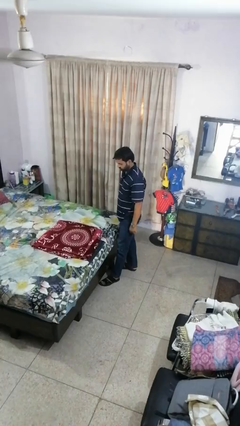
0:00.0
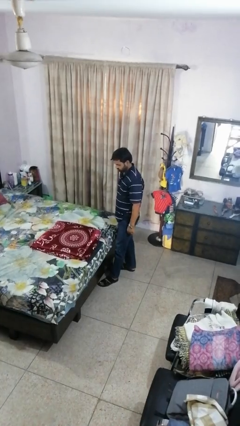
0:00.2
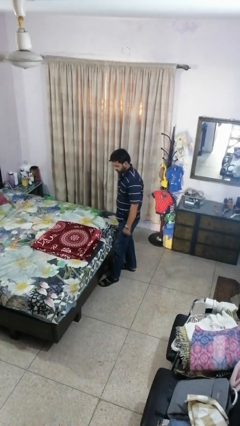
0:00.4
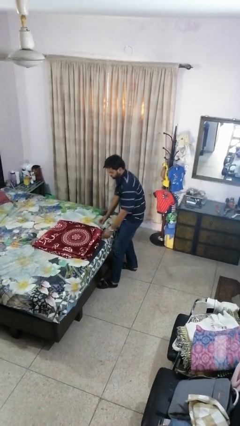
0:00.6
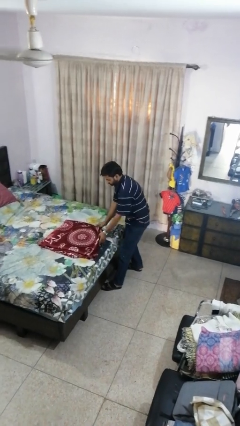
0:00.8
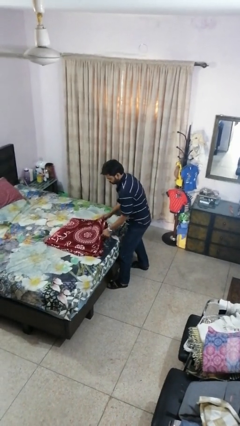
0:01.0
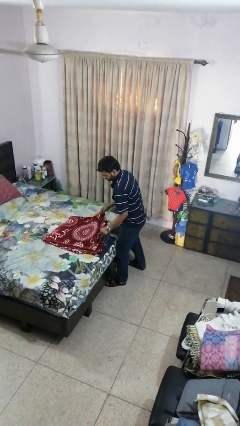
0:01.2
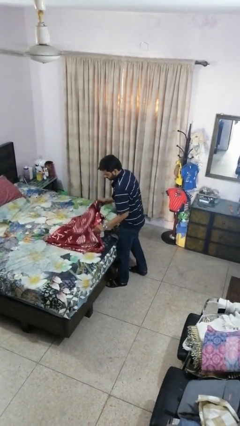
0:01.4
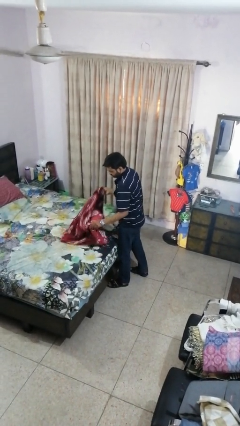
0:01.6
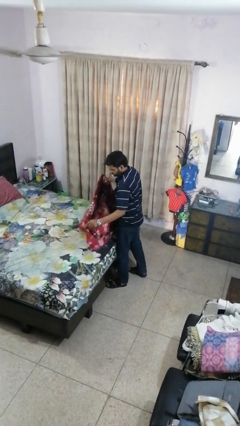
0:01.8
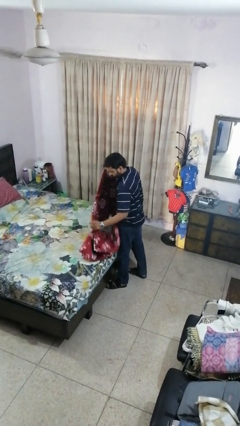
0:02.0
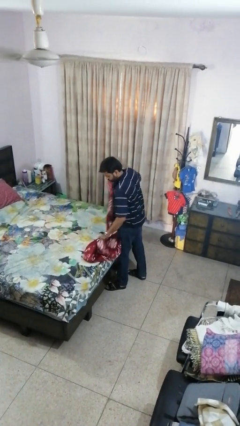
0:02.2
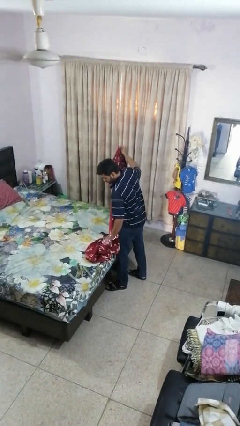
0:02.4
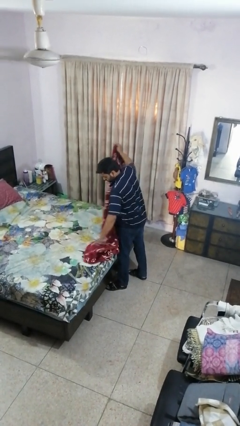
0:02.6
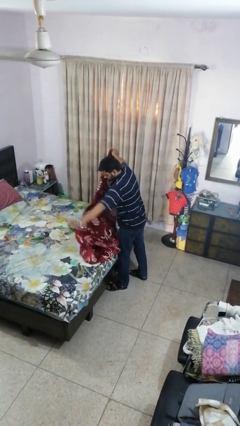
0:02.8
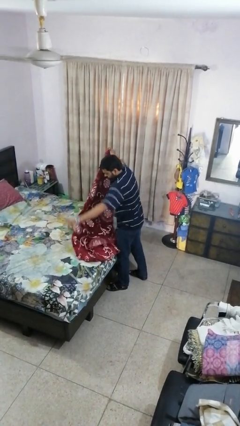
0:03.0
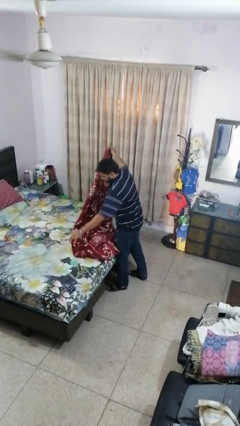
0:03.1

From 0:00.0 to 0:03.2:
person crumples paper

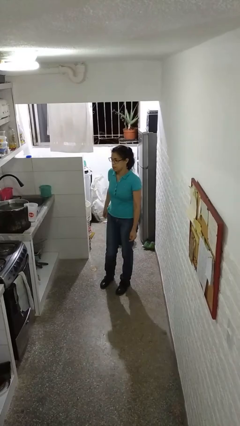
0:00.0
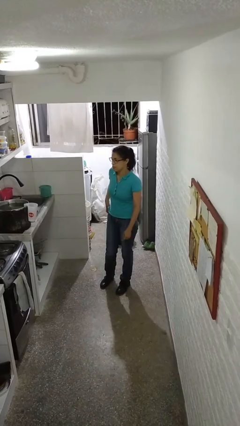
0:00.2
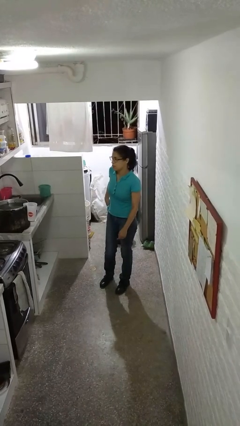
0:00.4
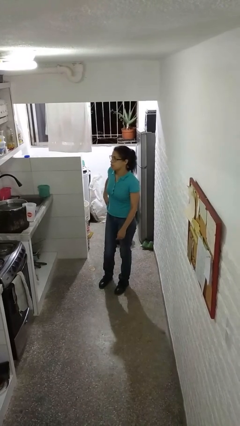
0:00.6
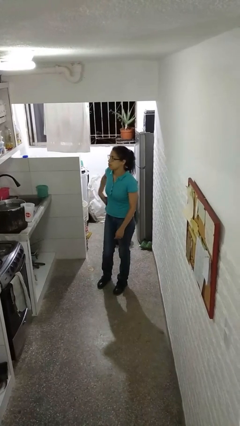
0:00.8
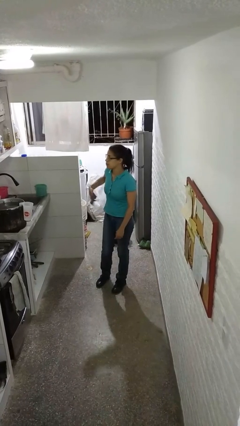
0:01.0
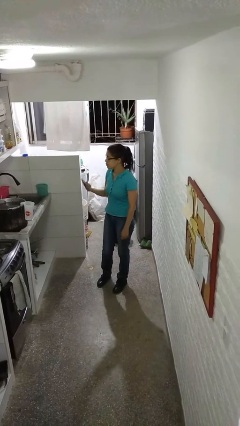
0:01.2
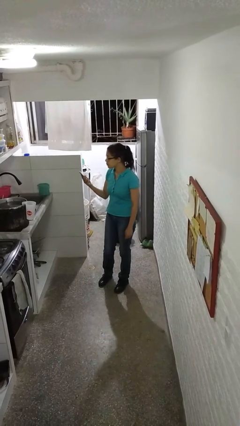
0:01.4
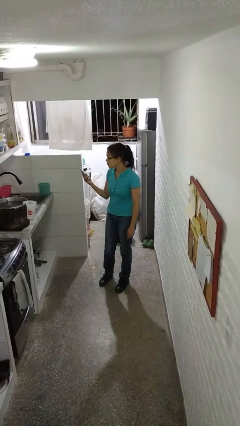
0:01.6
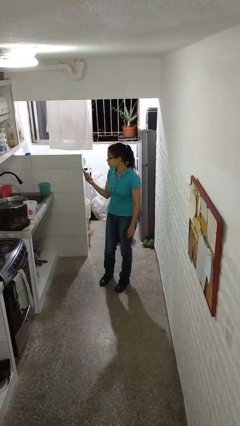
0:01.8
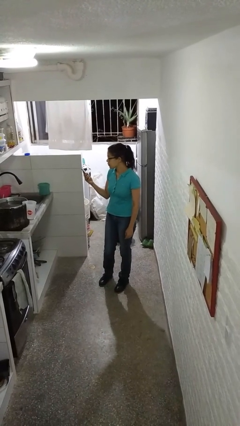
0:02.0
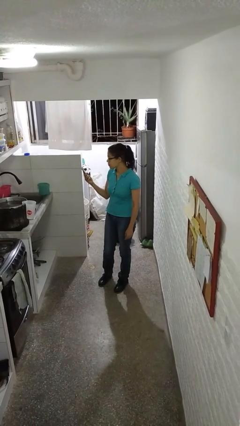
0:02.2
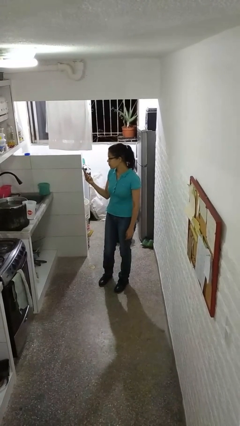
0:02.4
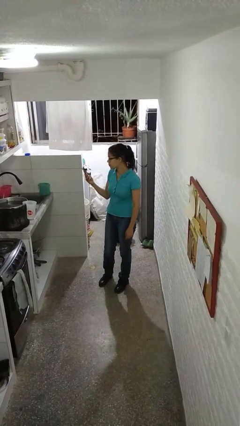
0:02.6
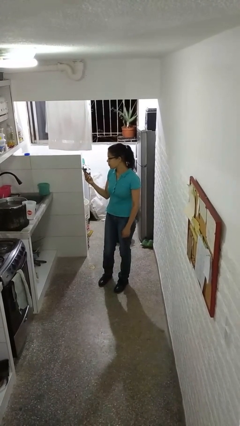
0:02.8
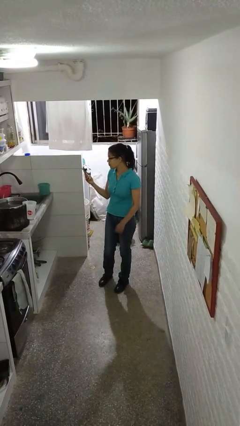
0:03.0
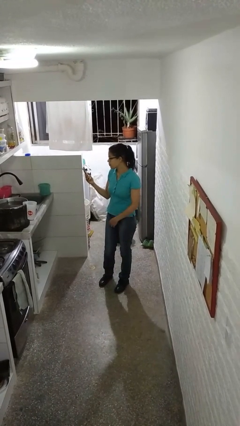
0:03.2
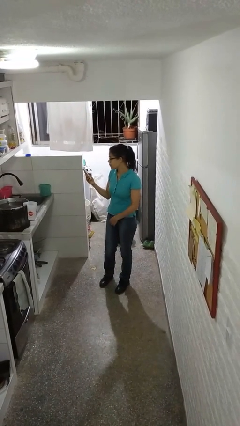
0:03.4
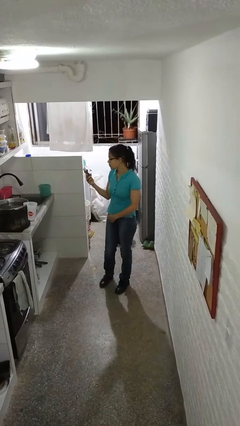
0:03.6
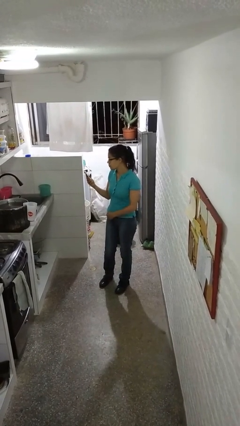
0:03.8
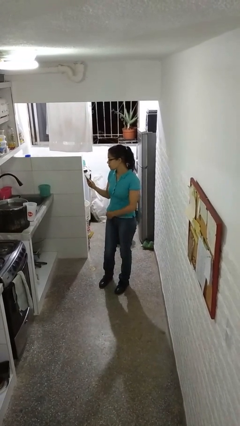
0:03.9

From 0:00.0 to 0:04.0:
person takes phone from pocket

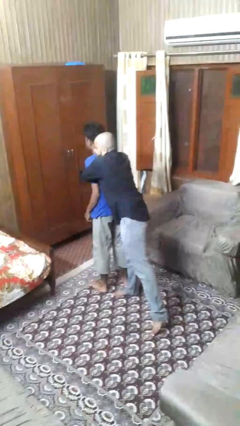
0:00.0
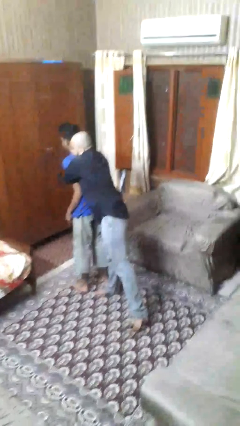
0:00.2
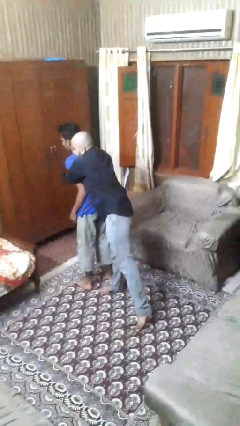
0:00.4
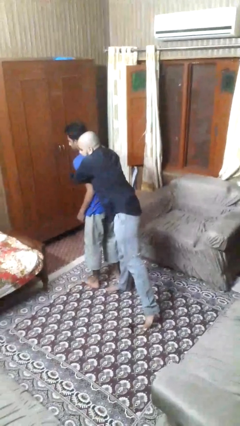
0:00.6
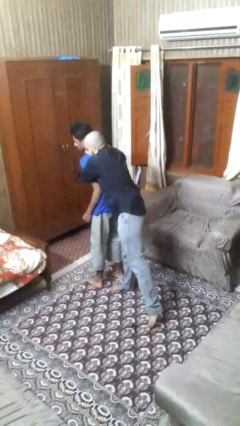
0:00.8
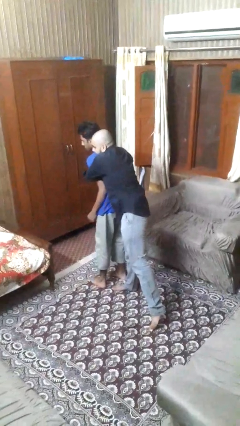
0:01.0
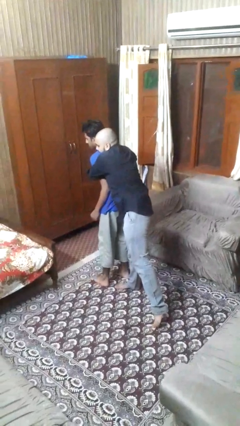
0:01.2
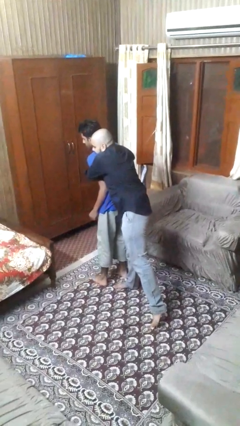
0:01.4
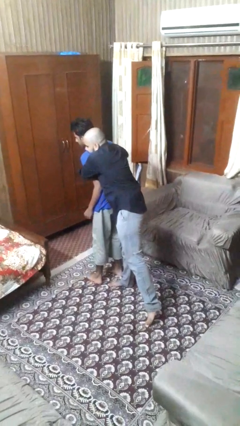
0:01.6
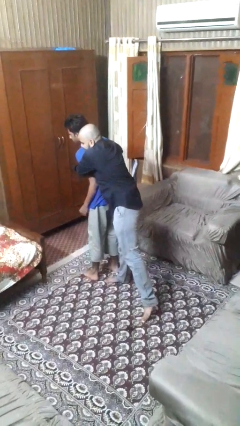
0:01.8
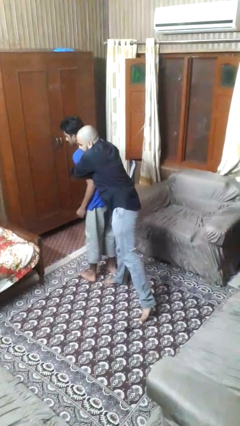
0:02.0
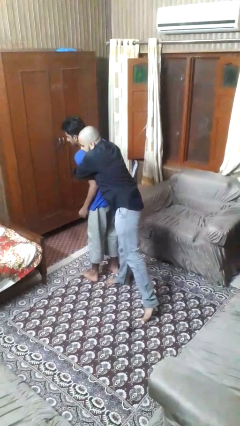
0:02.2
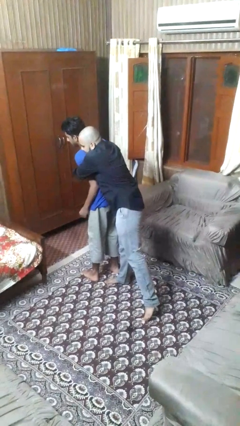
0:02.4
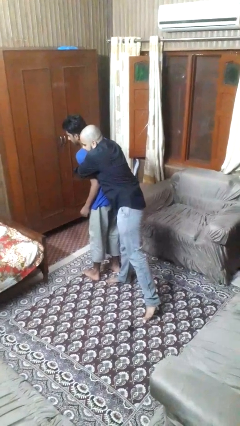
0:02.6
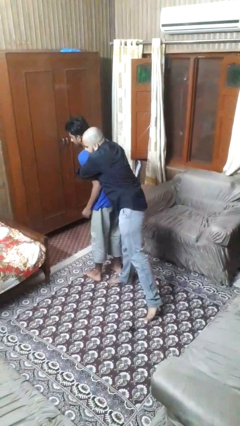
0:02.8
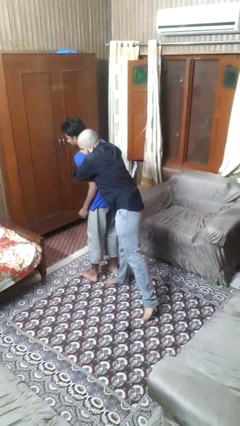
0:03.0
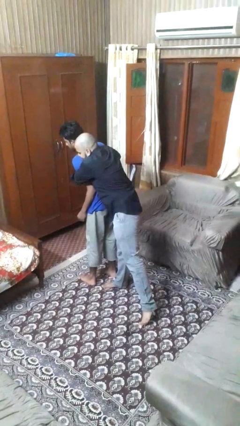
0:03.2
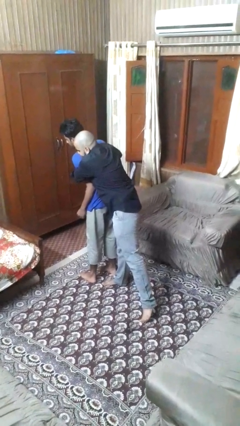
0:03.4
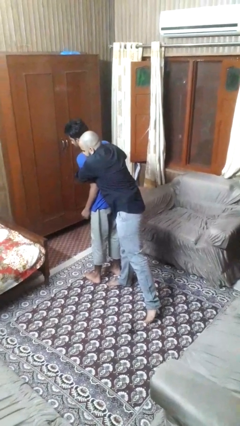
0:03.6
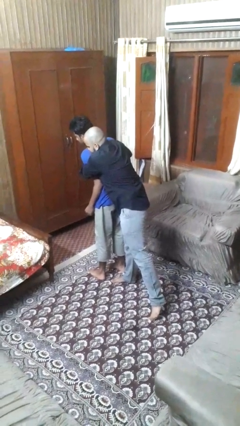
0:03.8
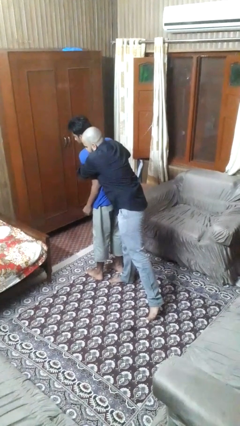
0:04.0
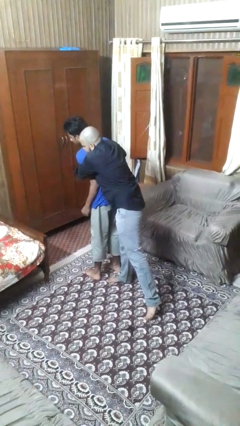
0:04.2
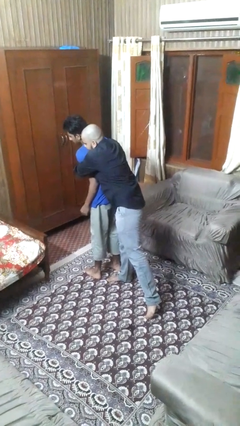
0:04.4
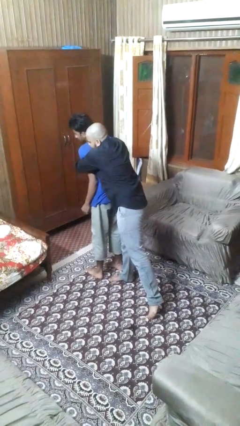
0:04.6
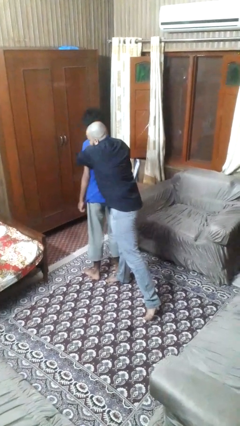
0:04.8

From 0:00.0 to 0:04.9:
person grabs person by shoulder

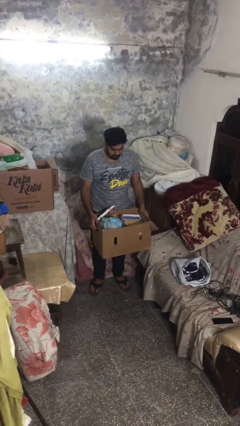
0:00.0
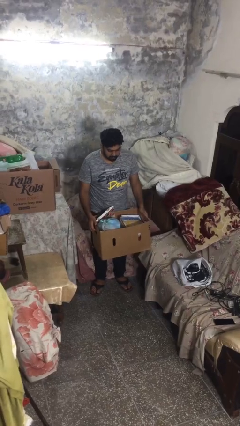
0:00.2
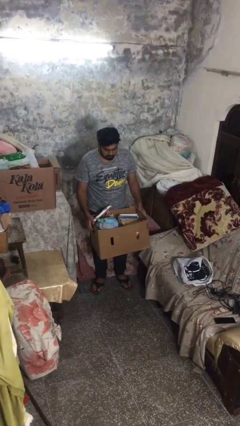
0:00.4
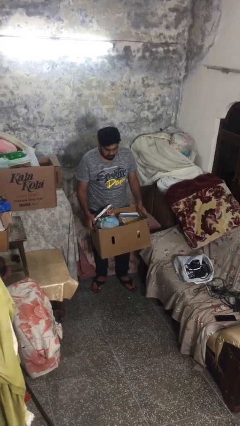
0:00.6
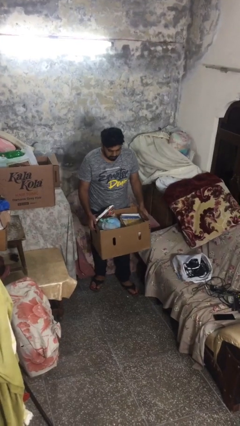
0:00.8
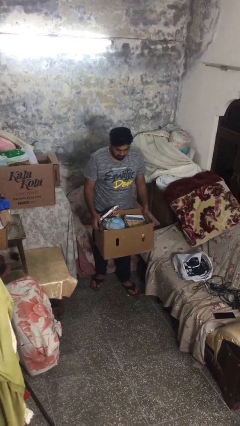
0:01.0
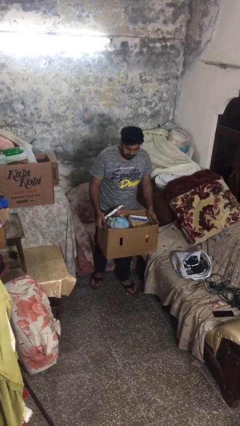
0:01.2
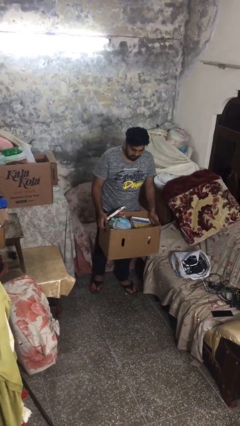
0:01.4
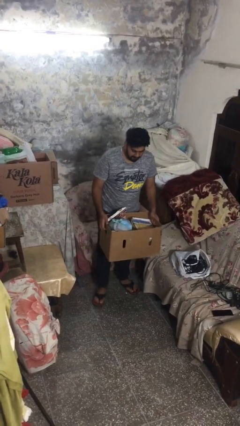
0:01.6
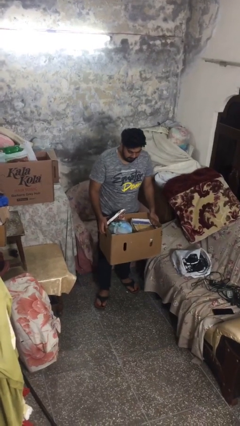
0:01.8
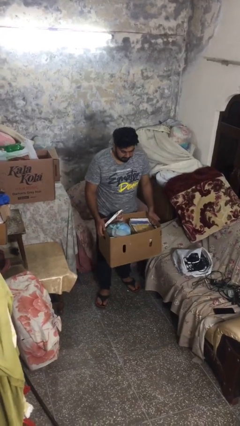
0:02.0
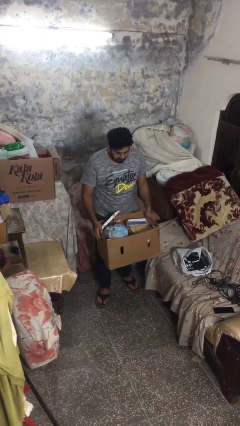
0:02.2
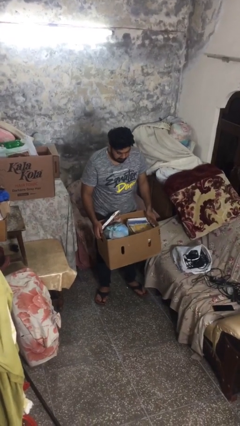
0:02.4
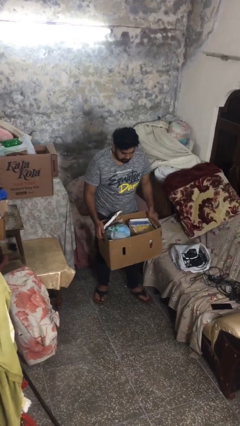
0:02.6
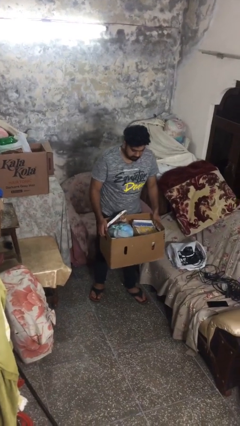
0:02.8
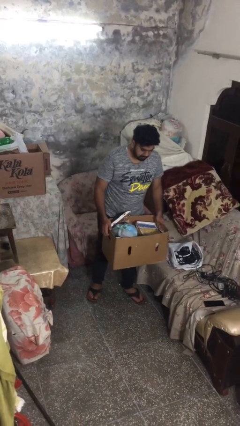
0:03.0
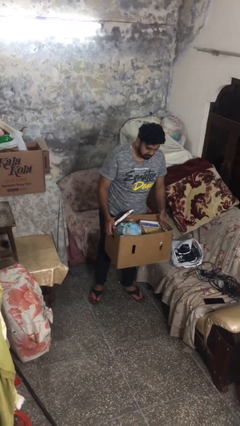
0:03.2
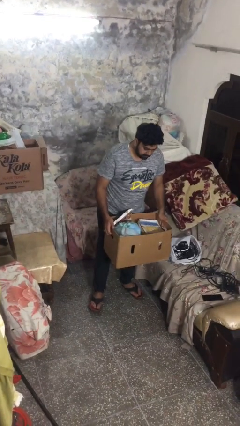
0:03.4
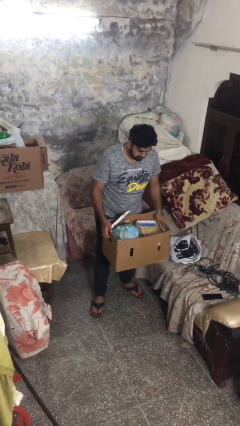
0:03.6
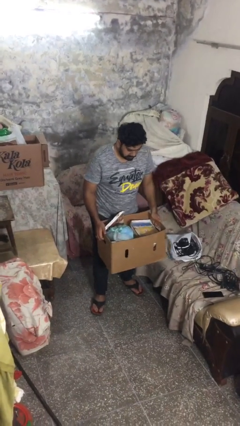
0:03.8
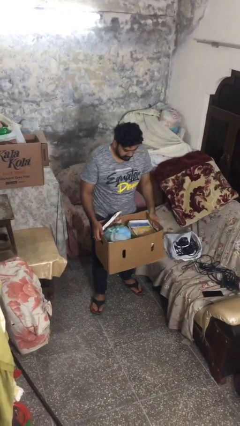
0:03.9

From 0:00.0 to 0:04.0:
person carries heavy object

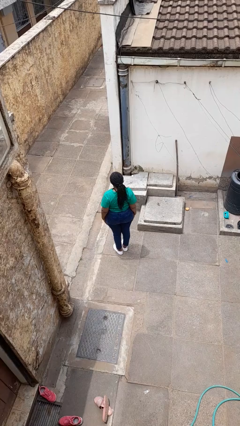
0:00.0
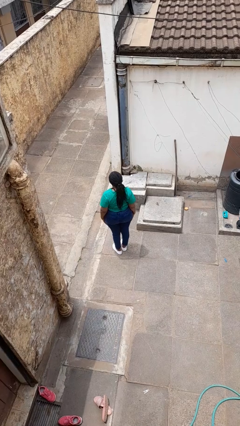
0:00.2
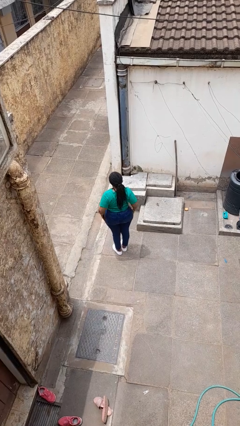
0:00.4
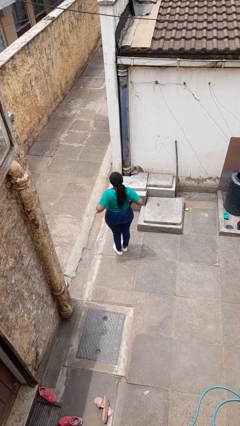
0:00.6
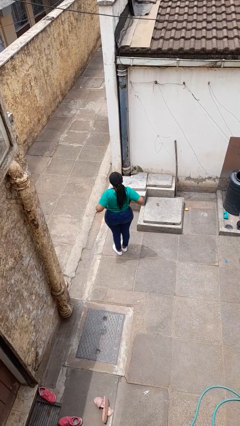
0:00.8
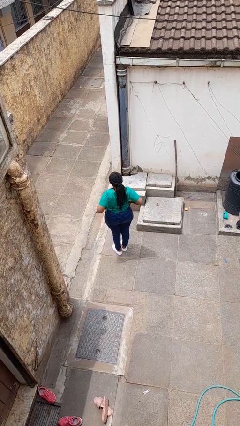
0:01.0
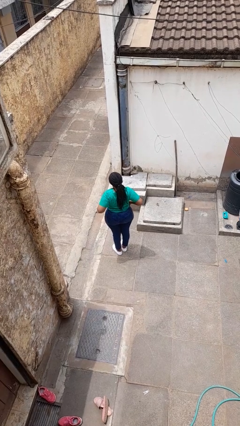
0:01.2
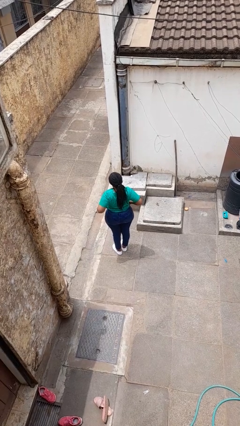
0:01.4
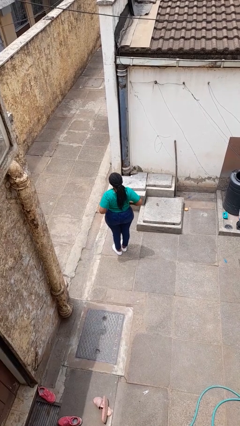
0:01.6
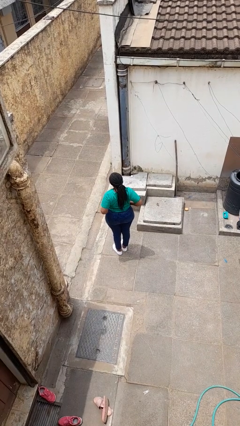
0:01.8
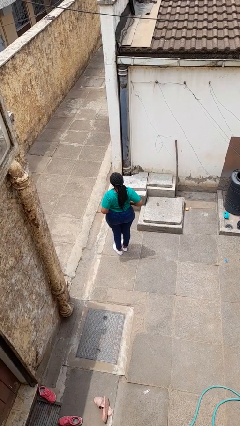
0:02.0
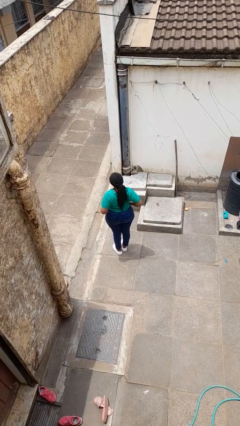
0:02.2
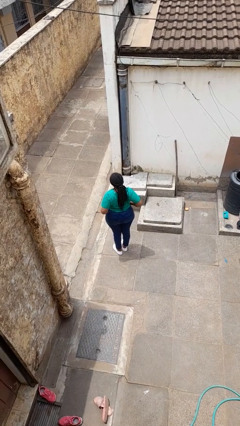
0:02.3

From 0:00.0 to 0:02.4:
person puts hands in back pockets
